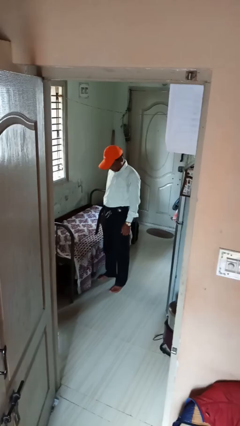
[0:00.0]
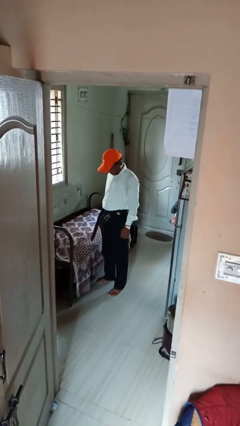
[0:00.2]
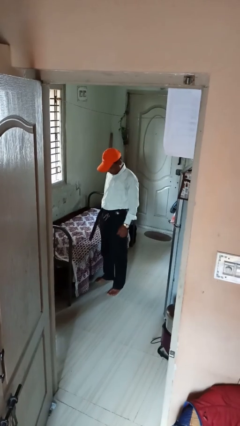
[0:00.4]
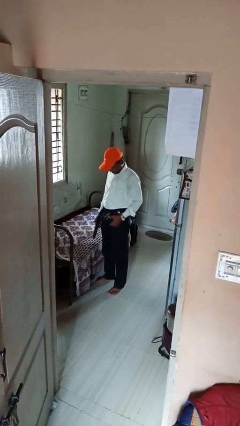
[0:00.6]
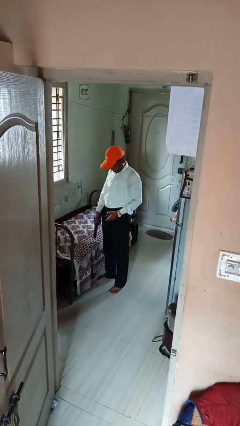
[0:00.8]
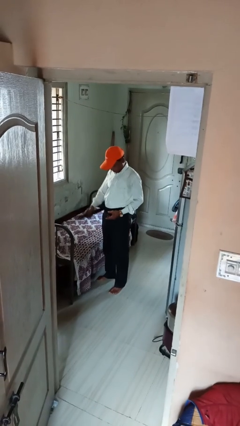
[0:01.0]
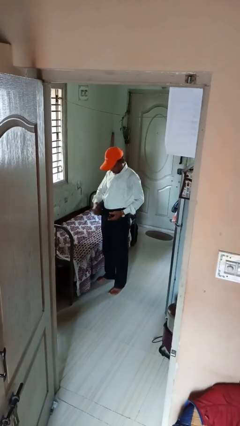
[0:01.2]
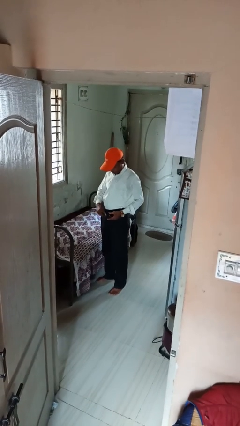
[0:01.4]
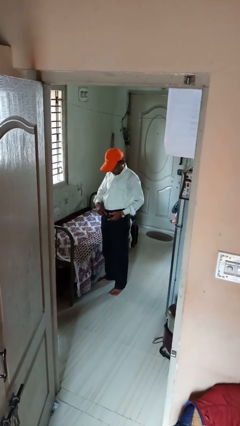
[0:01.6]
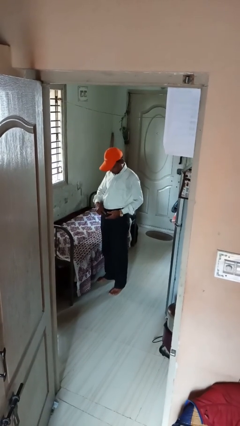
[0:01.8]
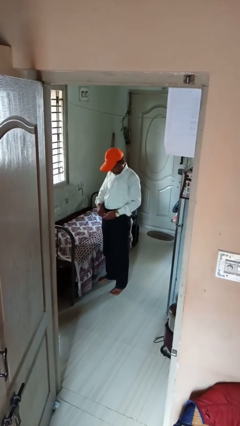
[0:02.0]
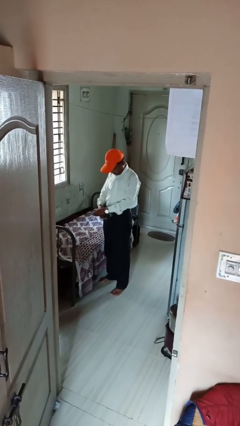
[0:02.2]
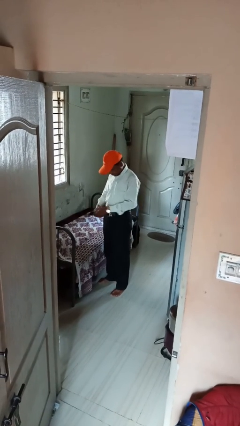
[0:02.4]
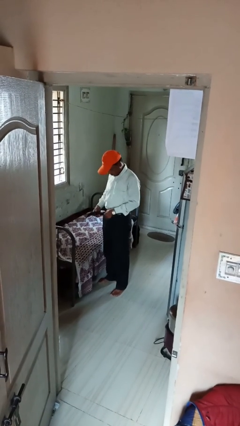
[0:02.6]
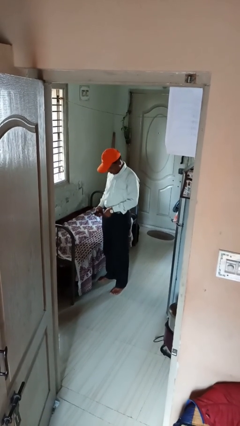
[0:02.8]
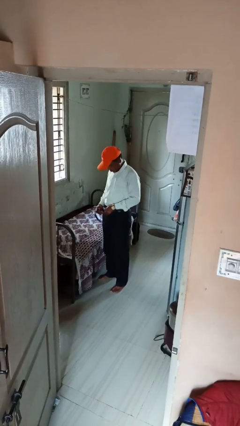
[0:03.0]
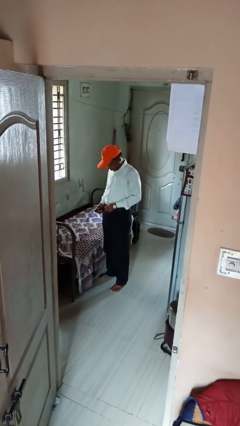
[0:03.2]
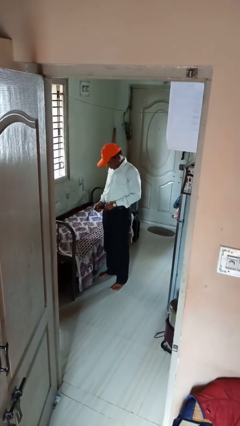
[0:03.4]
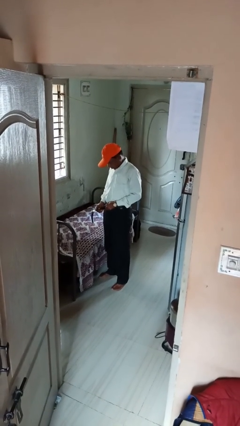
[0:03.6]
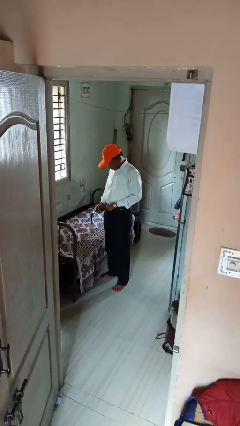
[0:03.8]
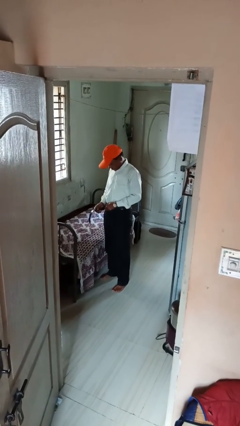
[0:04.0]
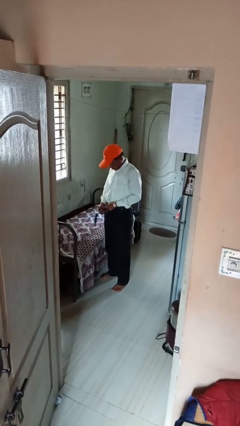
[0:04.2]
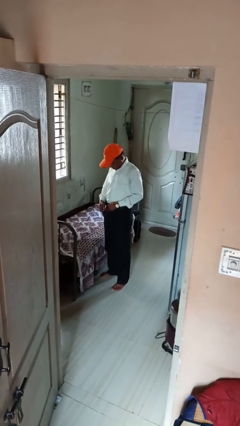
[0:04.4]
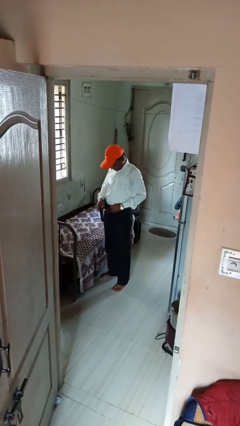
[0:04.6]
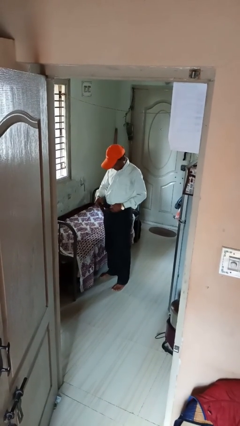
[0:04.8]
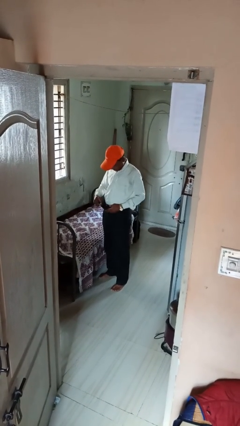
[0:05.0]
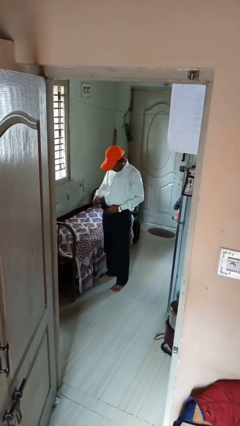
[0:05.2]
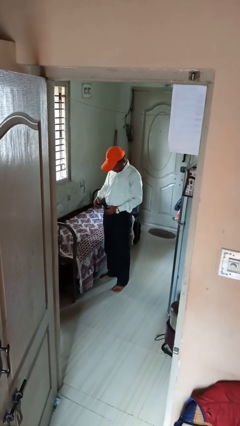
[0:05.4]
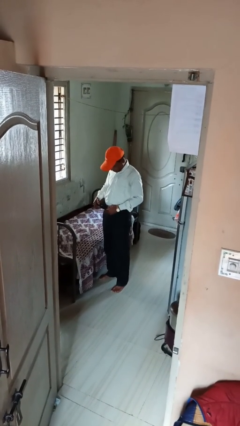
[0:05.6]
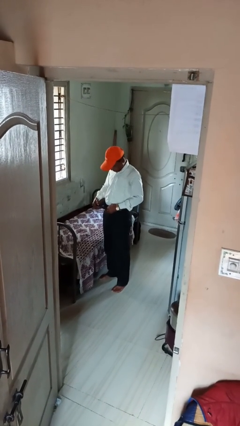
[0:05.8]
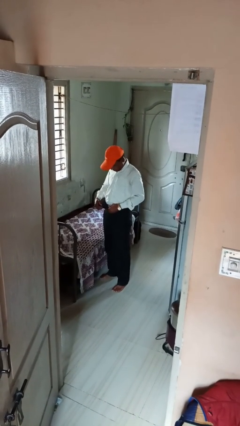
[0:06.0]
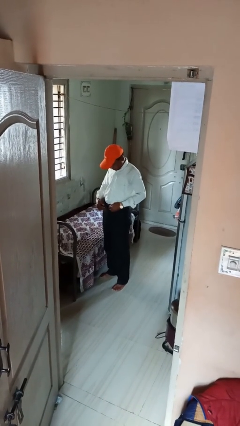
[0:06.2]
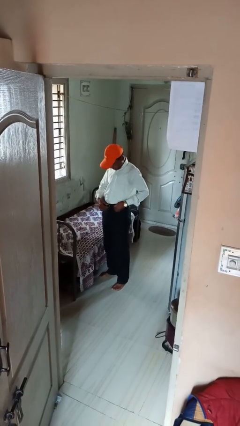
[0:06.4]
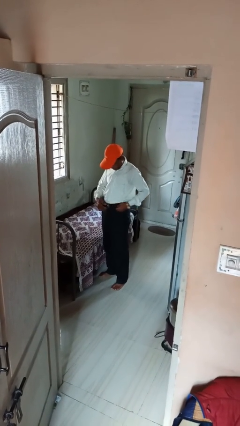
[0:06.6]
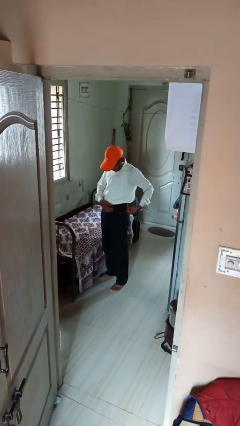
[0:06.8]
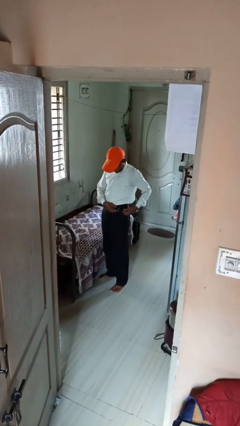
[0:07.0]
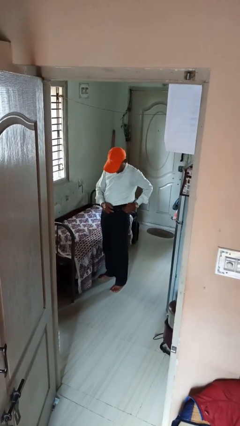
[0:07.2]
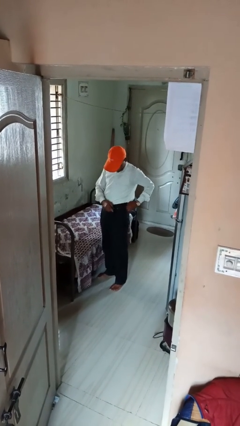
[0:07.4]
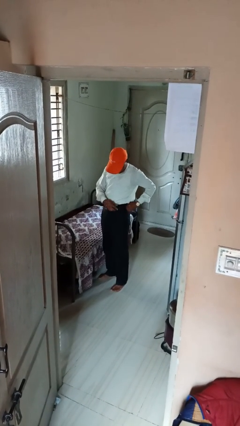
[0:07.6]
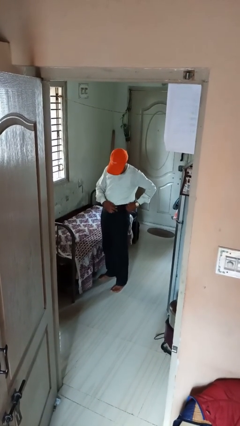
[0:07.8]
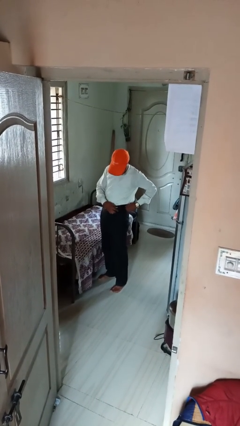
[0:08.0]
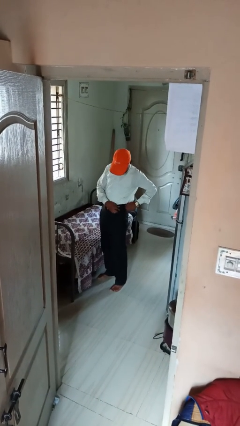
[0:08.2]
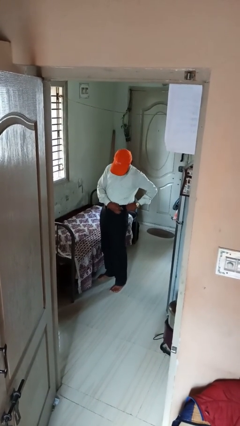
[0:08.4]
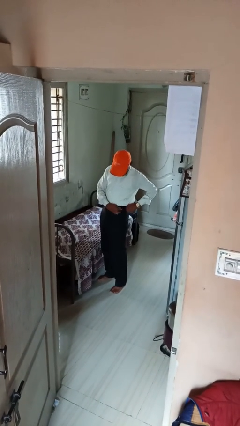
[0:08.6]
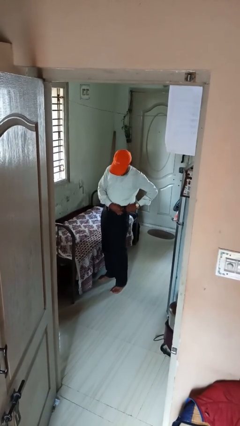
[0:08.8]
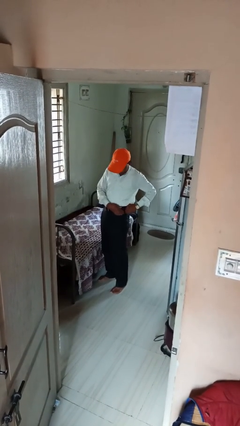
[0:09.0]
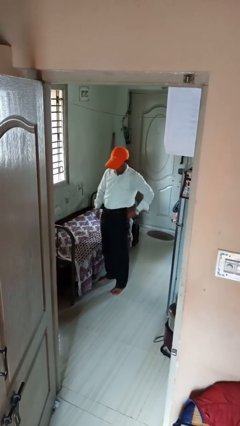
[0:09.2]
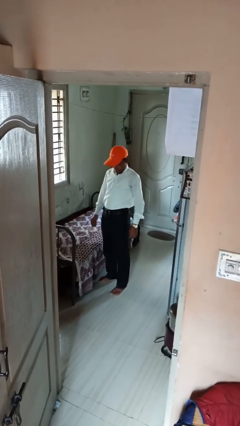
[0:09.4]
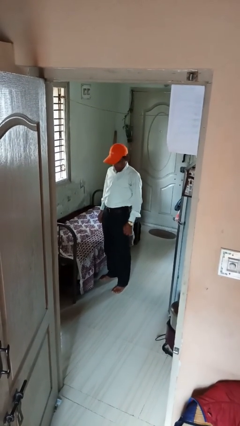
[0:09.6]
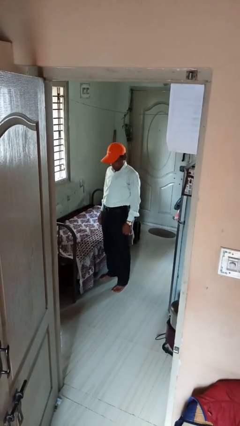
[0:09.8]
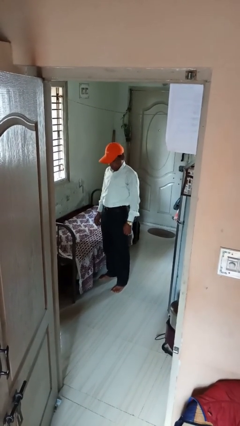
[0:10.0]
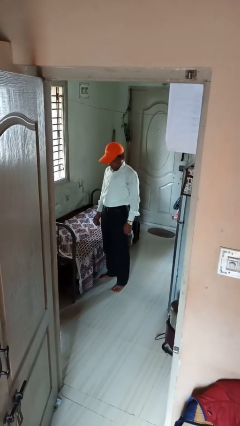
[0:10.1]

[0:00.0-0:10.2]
person puts on belt

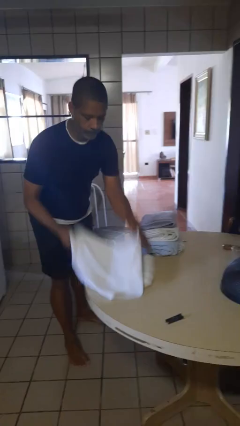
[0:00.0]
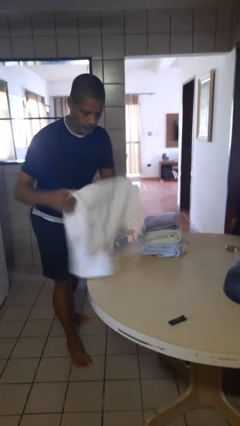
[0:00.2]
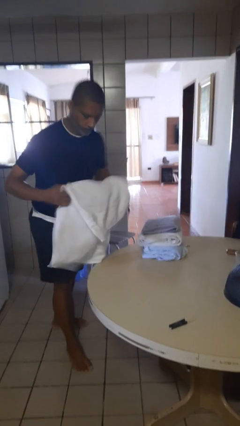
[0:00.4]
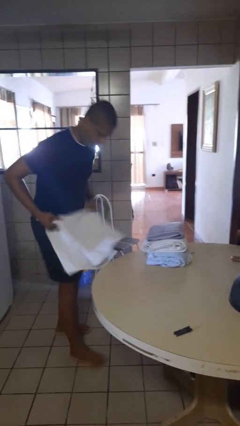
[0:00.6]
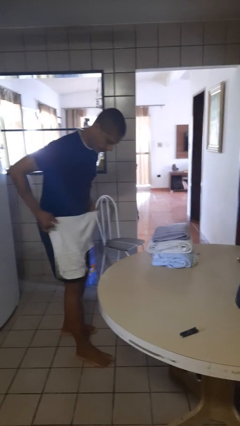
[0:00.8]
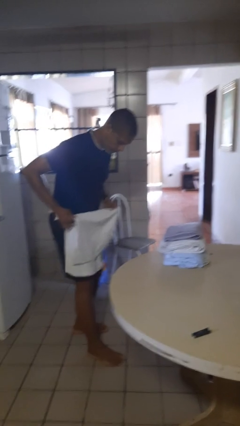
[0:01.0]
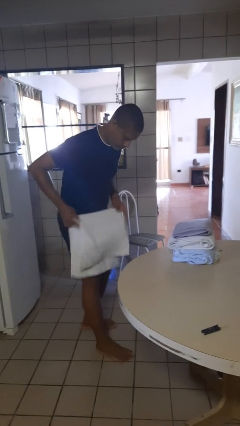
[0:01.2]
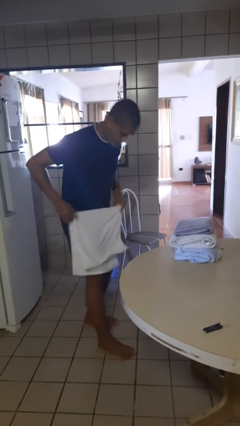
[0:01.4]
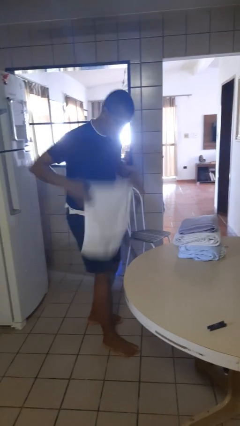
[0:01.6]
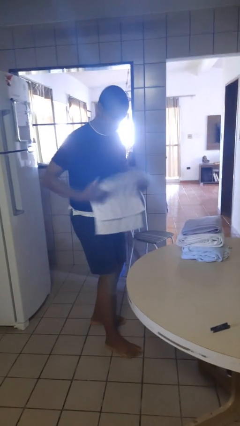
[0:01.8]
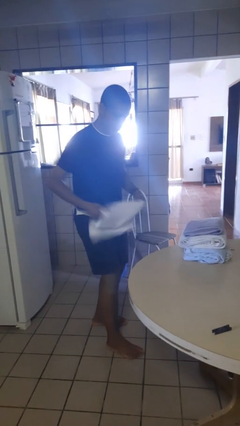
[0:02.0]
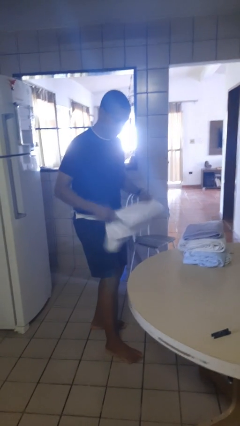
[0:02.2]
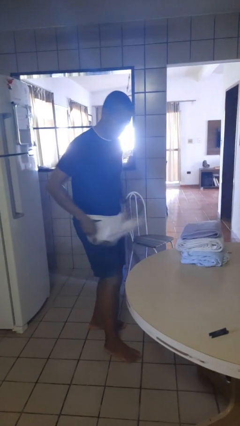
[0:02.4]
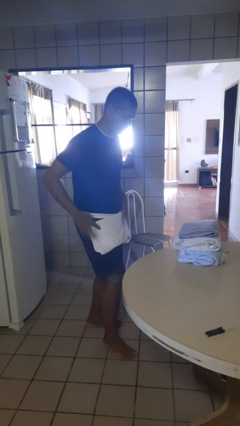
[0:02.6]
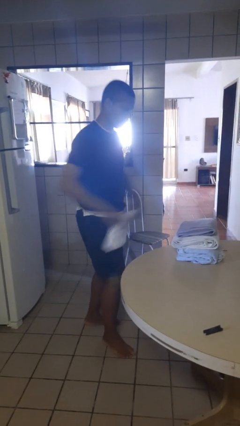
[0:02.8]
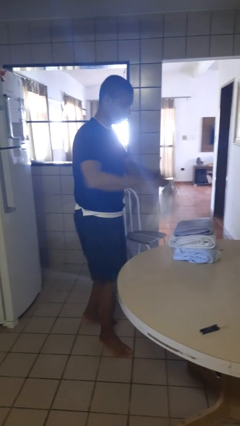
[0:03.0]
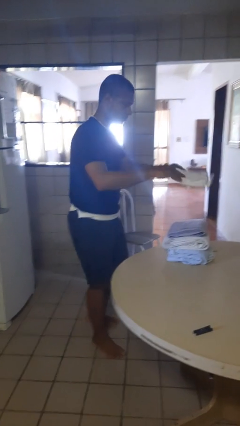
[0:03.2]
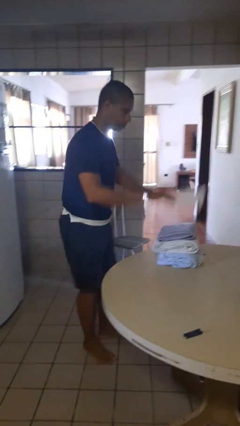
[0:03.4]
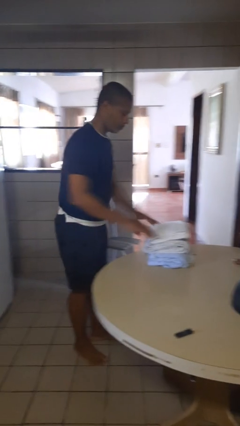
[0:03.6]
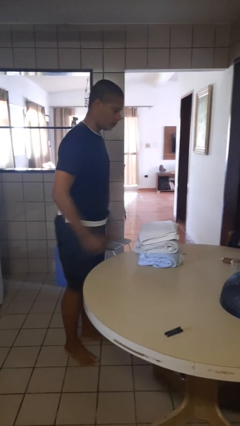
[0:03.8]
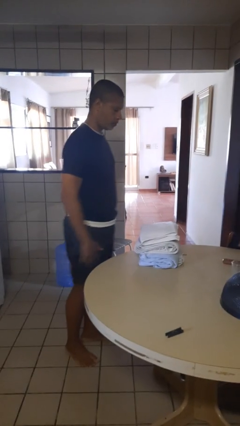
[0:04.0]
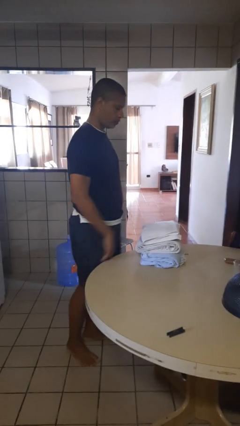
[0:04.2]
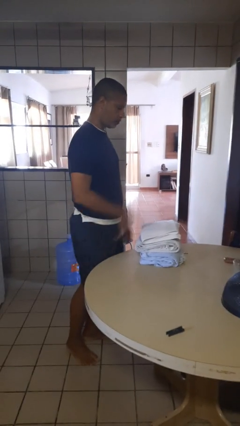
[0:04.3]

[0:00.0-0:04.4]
person folds towel

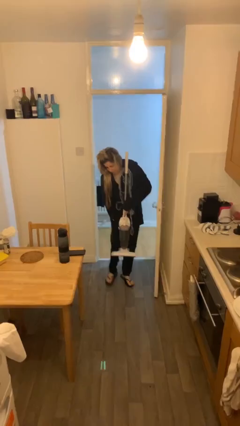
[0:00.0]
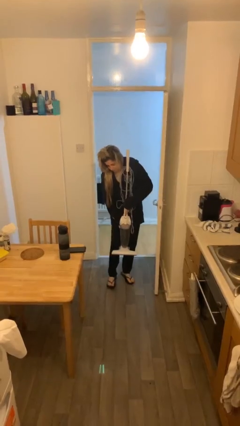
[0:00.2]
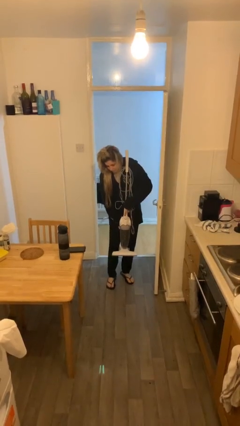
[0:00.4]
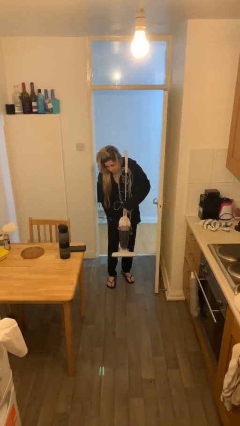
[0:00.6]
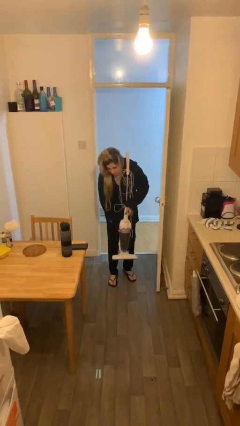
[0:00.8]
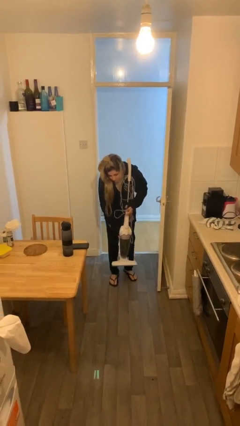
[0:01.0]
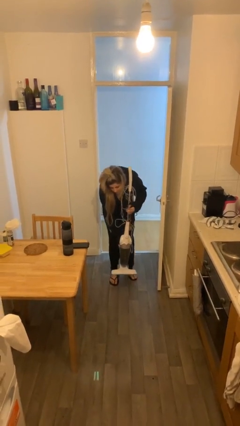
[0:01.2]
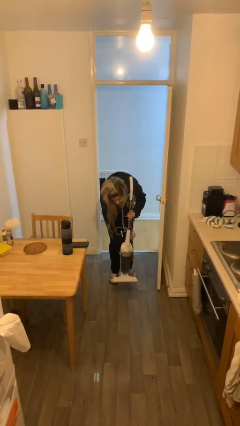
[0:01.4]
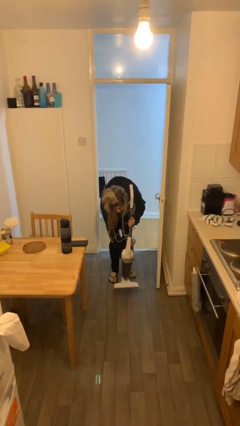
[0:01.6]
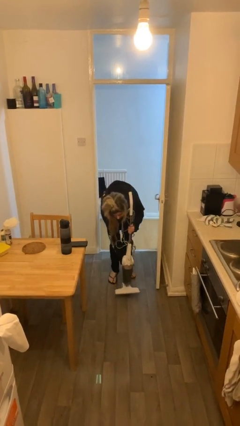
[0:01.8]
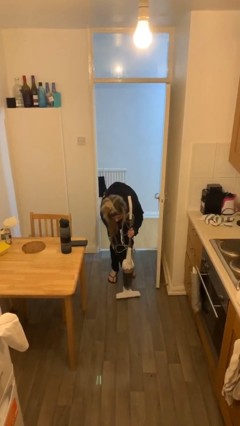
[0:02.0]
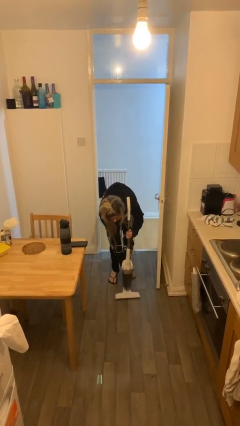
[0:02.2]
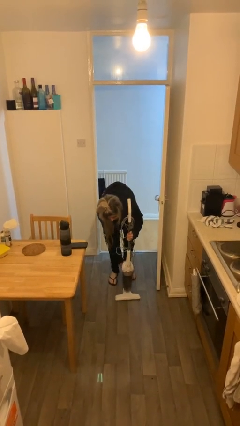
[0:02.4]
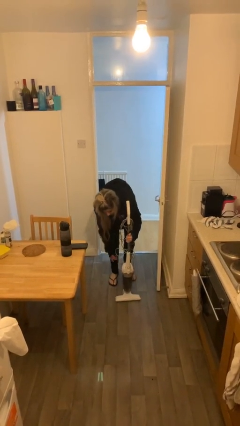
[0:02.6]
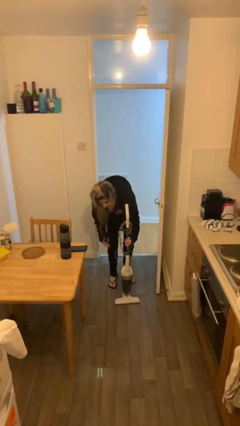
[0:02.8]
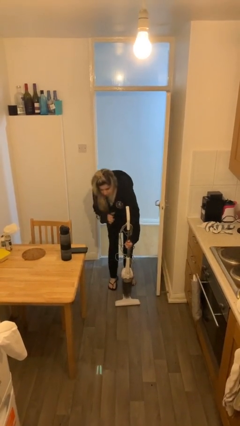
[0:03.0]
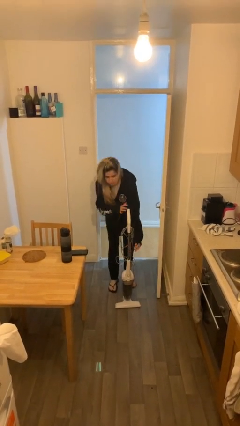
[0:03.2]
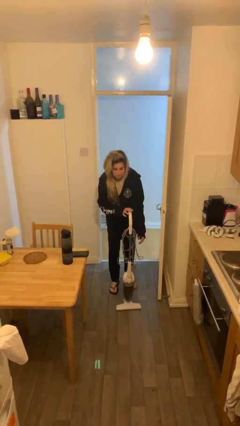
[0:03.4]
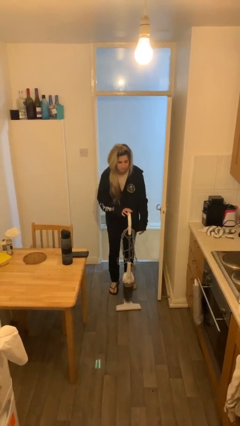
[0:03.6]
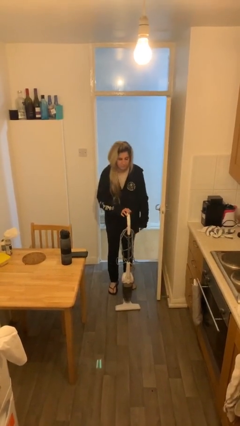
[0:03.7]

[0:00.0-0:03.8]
person puts down object on floor
